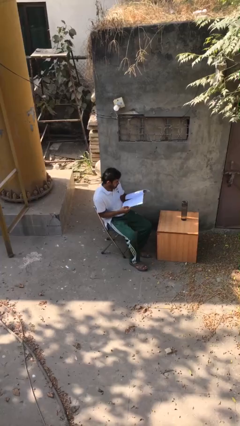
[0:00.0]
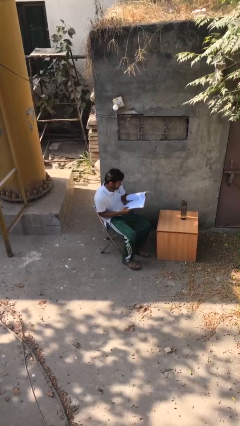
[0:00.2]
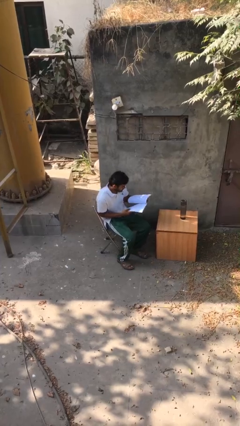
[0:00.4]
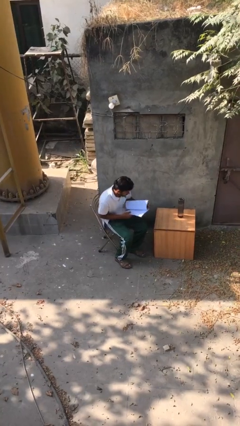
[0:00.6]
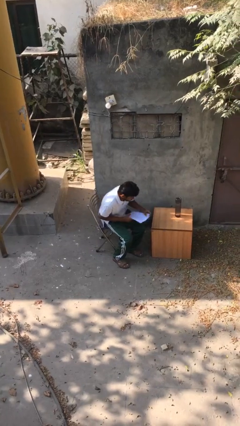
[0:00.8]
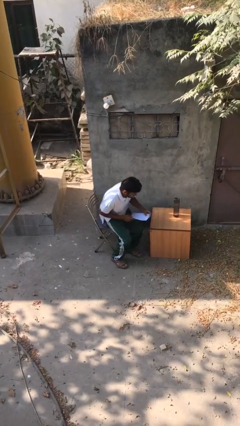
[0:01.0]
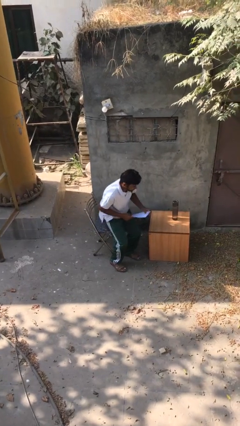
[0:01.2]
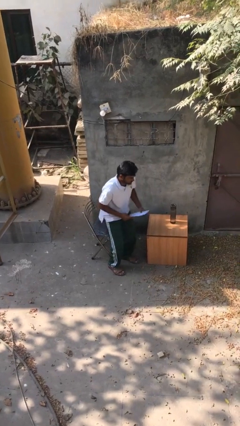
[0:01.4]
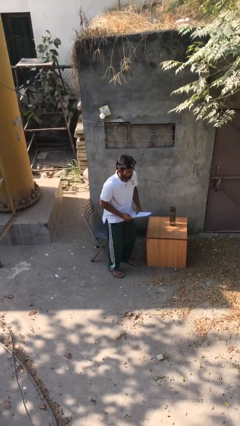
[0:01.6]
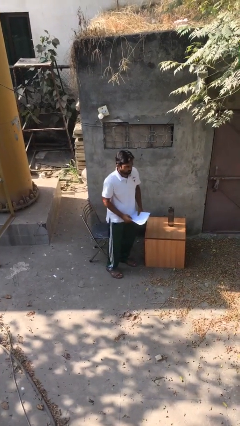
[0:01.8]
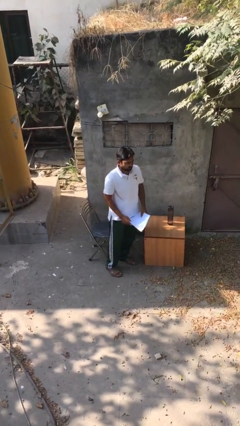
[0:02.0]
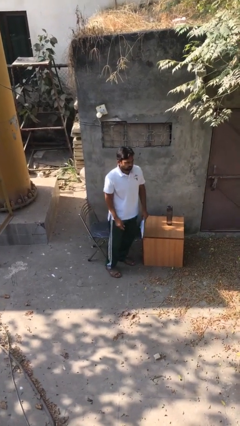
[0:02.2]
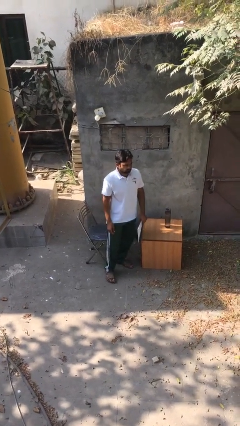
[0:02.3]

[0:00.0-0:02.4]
person stands up

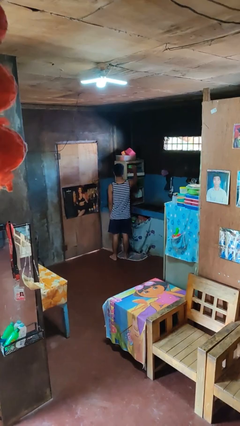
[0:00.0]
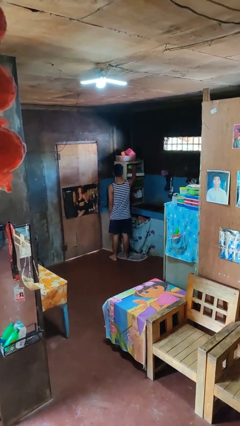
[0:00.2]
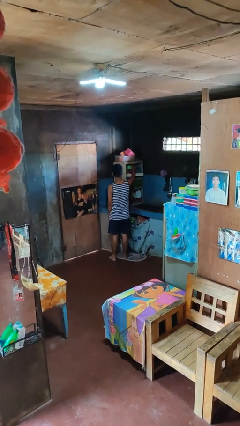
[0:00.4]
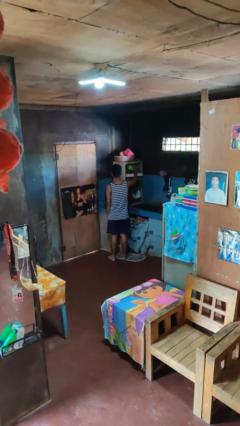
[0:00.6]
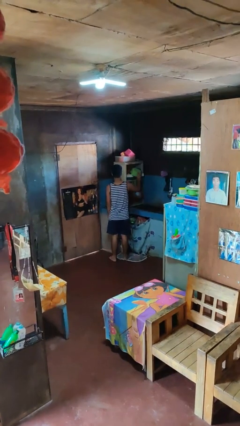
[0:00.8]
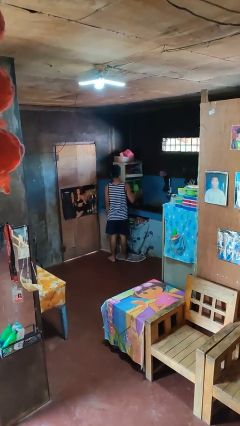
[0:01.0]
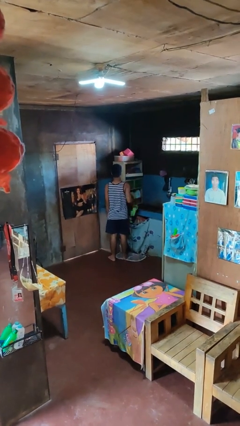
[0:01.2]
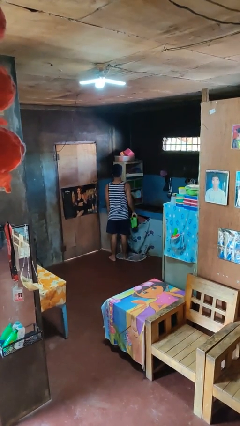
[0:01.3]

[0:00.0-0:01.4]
person takes object from cabinet

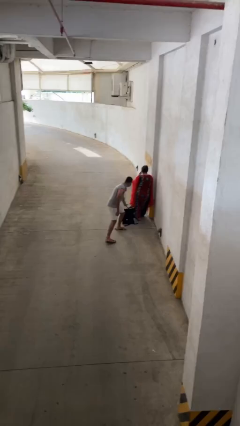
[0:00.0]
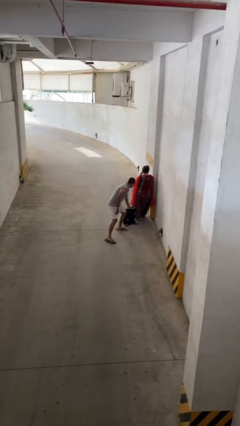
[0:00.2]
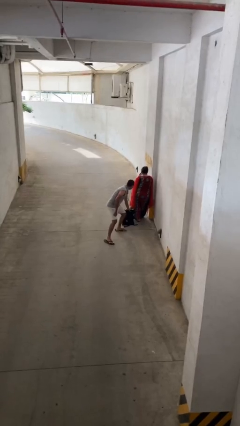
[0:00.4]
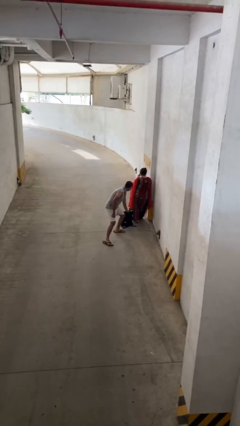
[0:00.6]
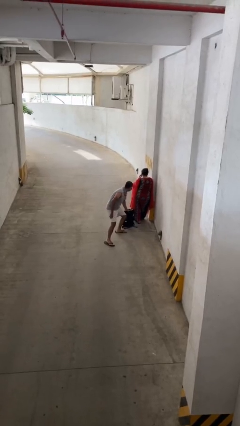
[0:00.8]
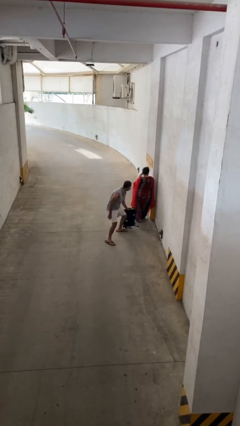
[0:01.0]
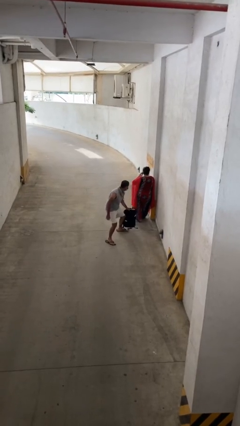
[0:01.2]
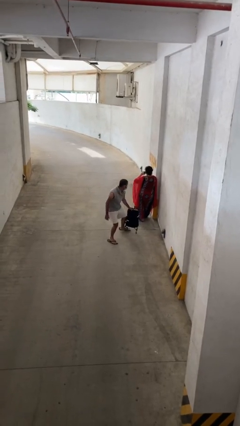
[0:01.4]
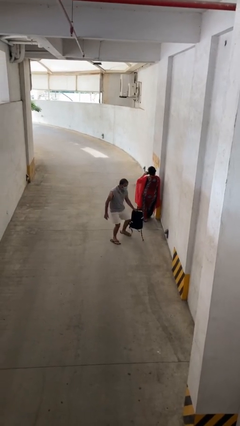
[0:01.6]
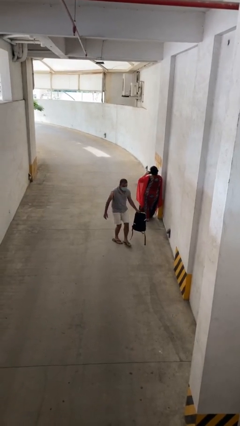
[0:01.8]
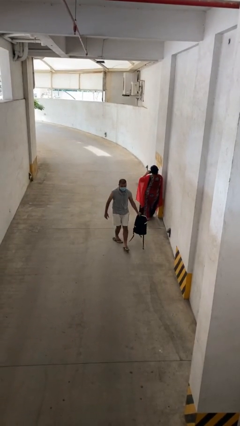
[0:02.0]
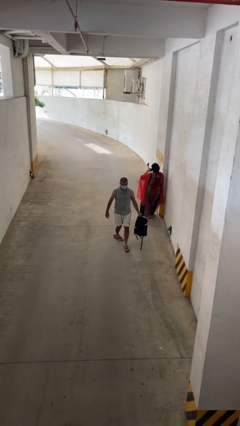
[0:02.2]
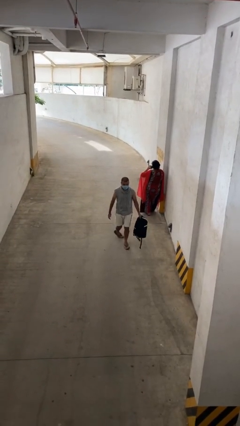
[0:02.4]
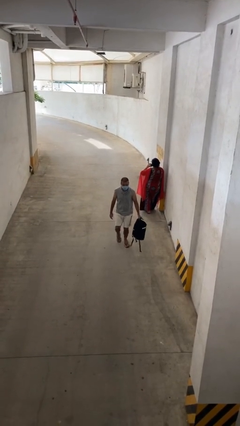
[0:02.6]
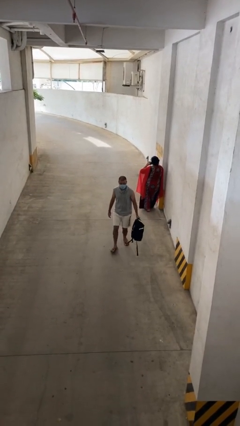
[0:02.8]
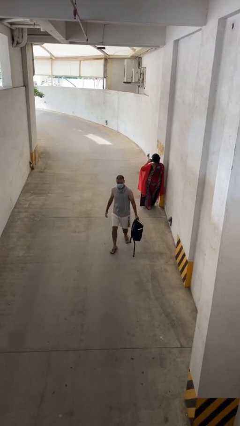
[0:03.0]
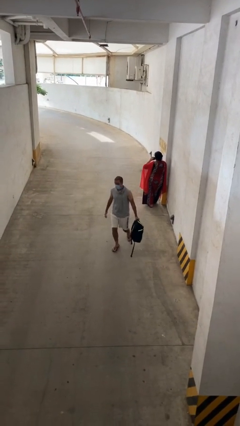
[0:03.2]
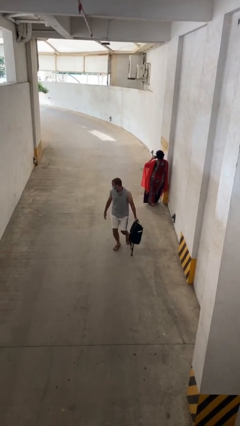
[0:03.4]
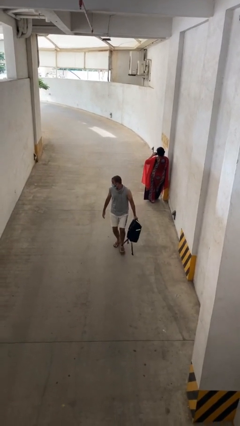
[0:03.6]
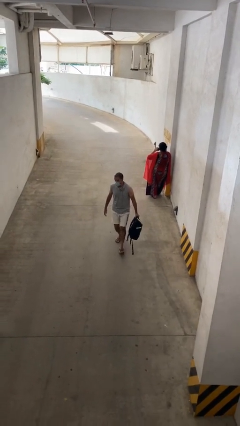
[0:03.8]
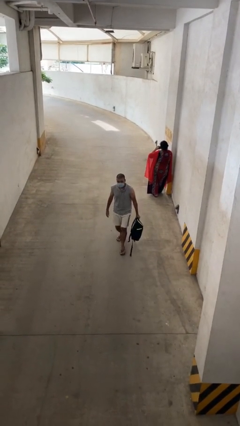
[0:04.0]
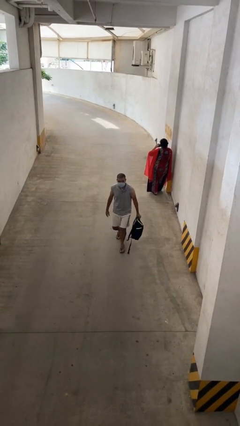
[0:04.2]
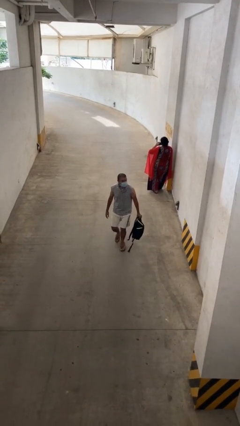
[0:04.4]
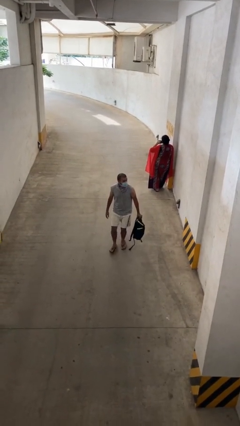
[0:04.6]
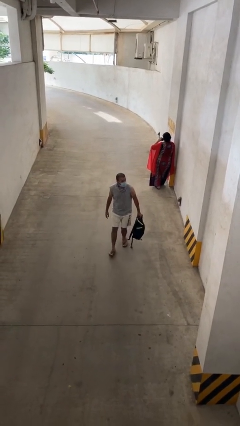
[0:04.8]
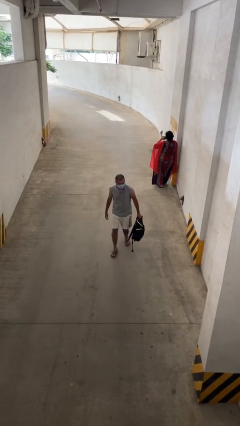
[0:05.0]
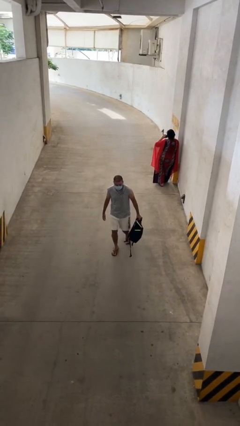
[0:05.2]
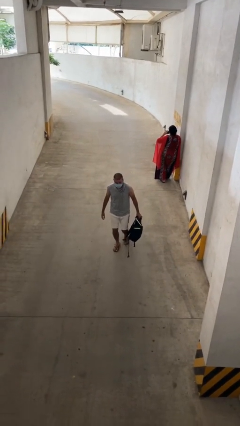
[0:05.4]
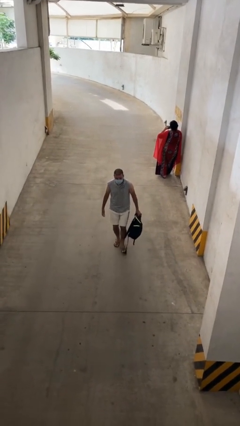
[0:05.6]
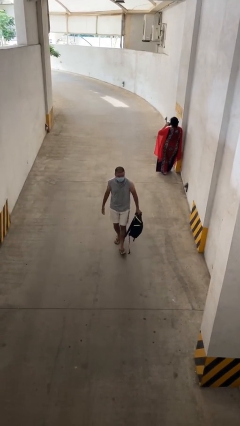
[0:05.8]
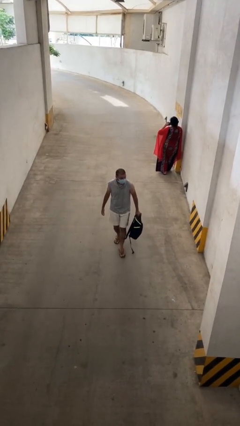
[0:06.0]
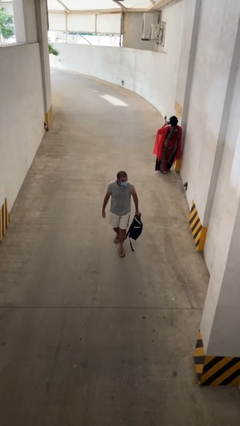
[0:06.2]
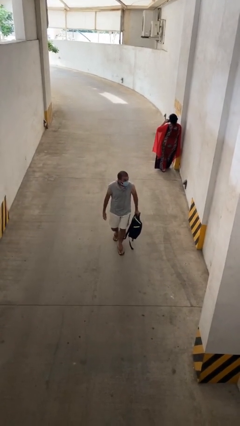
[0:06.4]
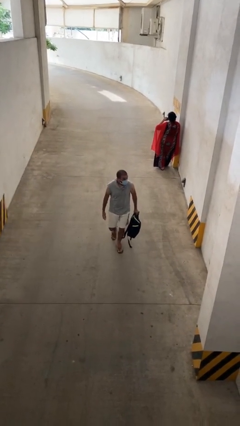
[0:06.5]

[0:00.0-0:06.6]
person steals object from person

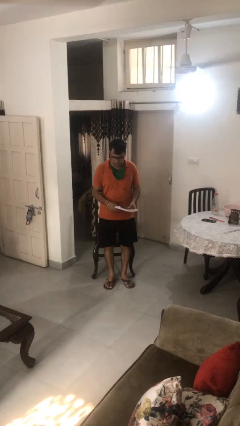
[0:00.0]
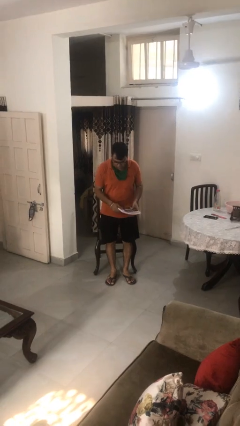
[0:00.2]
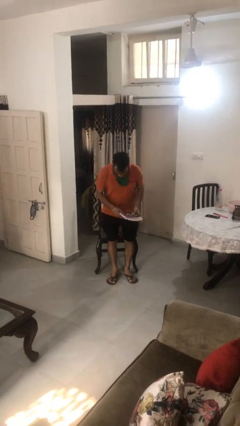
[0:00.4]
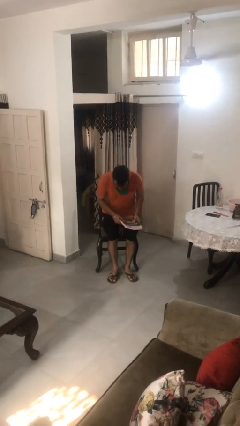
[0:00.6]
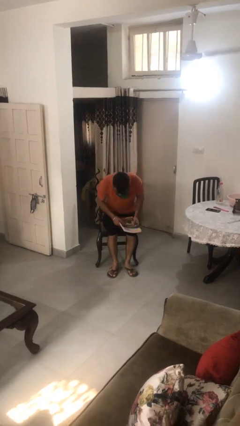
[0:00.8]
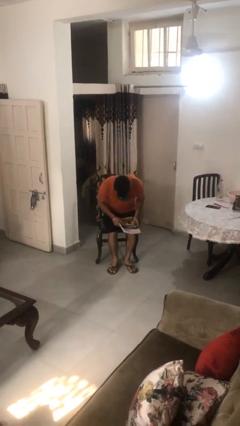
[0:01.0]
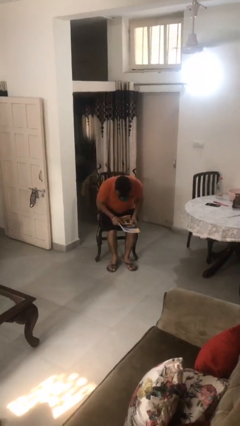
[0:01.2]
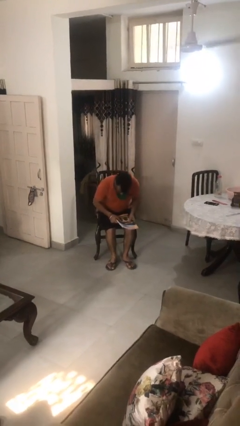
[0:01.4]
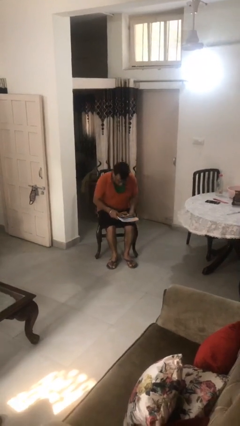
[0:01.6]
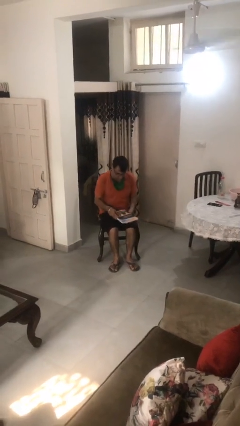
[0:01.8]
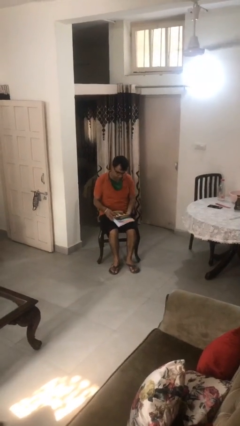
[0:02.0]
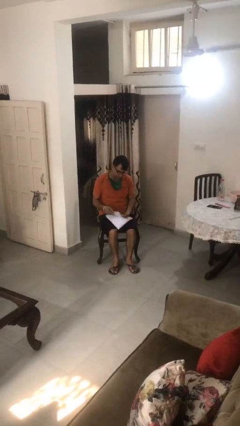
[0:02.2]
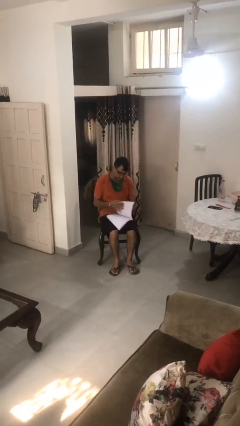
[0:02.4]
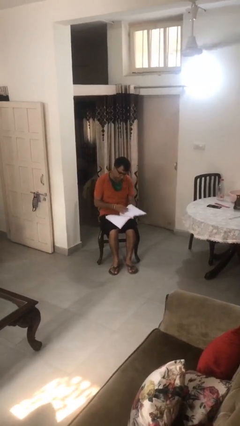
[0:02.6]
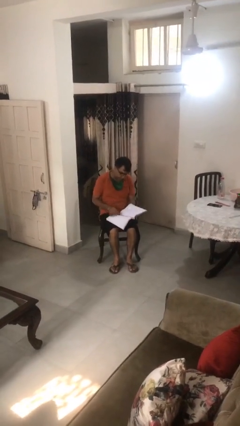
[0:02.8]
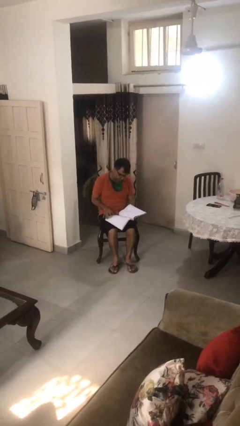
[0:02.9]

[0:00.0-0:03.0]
person sits down

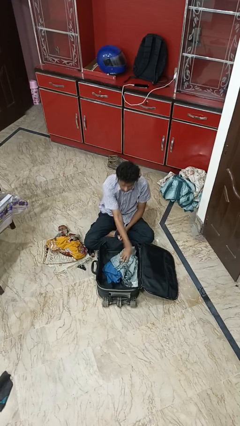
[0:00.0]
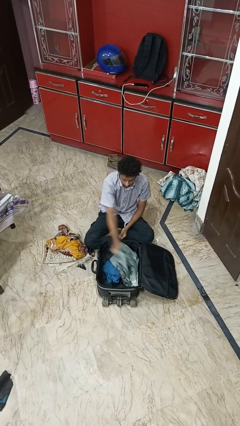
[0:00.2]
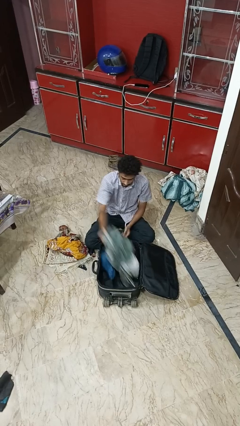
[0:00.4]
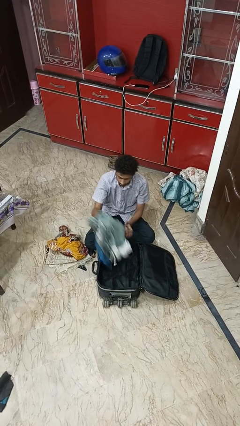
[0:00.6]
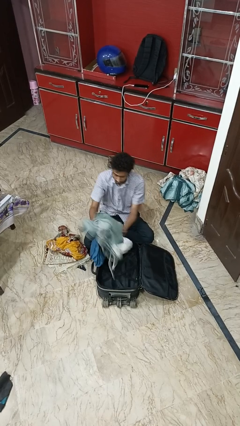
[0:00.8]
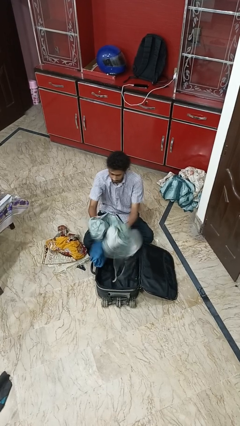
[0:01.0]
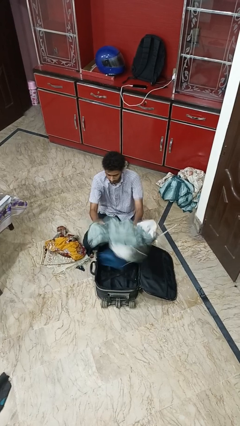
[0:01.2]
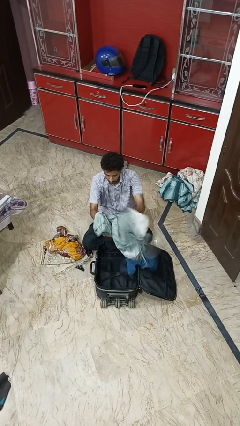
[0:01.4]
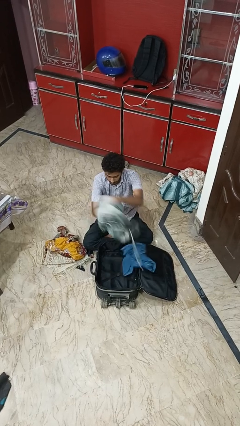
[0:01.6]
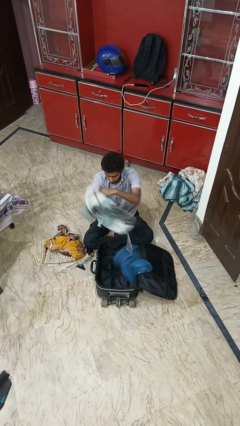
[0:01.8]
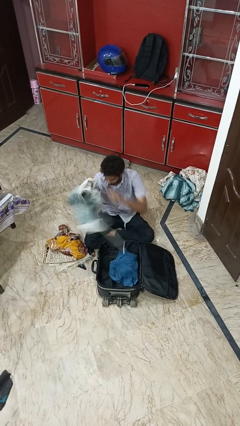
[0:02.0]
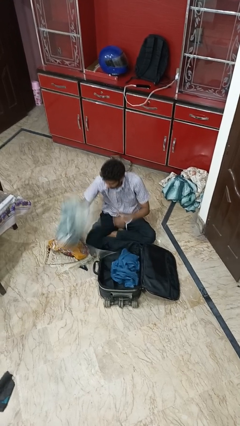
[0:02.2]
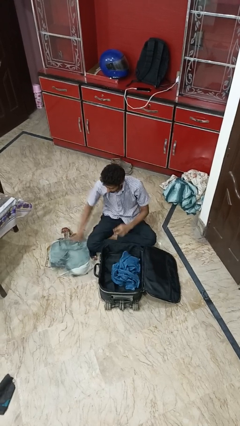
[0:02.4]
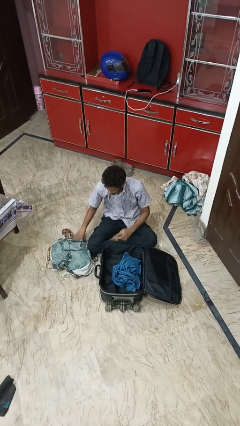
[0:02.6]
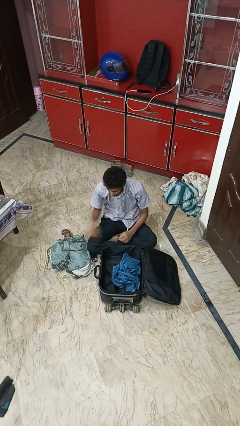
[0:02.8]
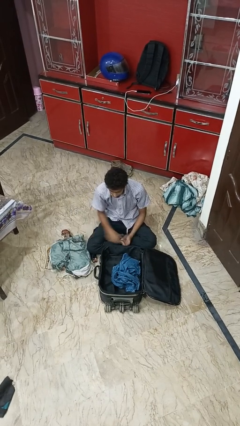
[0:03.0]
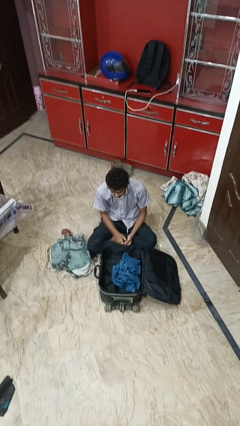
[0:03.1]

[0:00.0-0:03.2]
person unloads clothes from suitcase

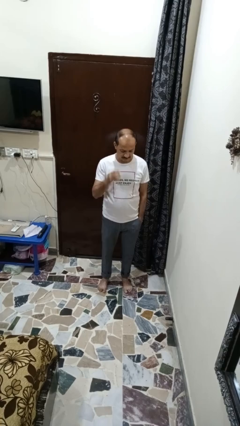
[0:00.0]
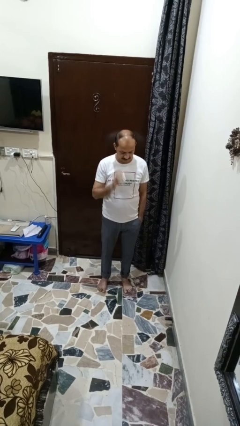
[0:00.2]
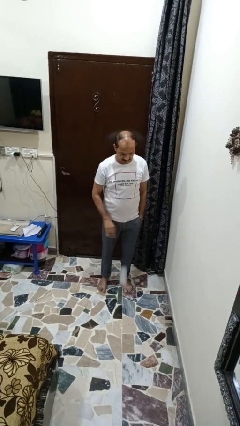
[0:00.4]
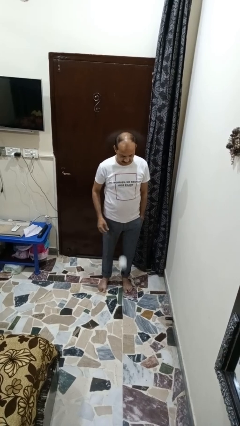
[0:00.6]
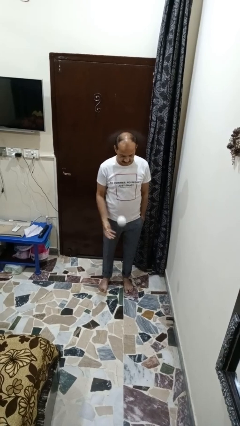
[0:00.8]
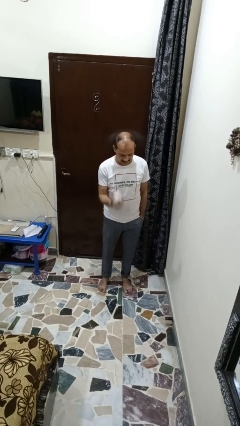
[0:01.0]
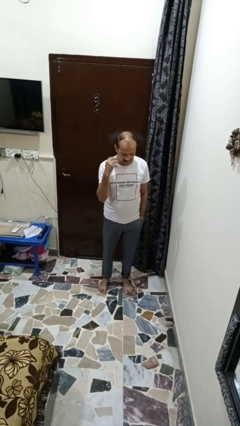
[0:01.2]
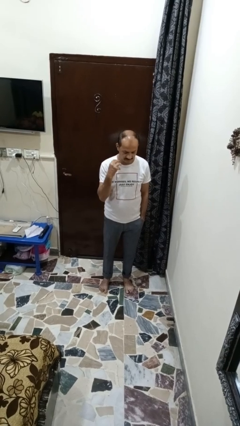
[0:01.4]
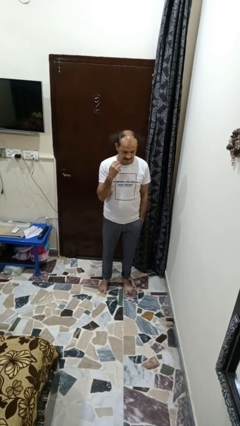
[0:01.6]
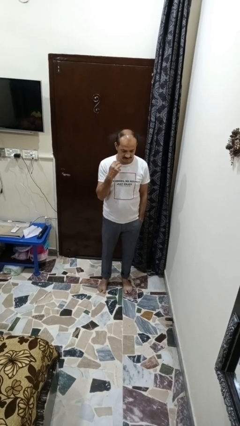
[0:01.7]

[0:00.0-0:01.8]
person bounces ball on floor
